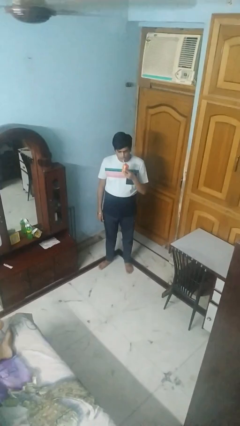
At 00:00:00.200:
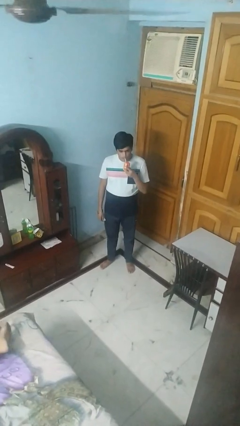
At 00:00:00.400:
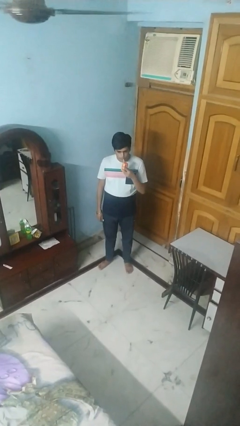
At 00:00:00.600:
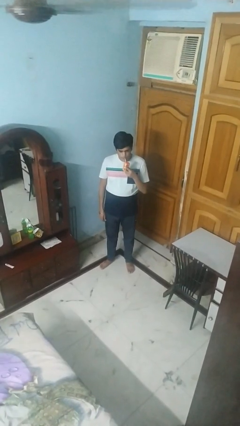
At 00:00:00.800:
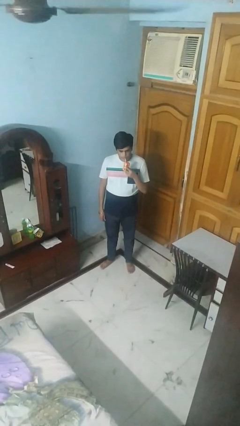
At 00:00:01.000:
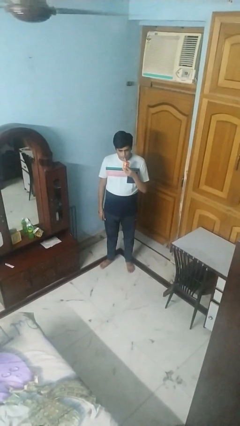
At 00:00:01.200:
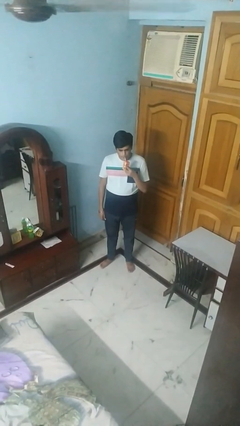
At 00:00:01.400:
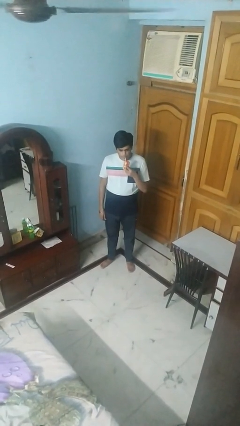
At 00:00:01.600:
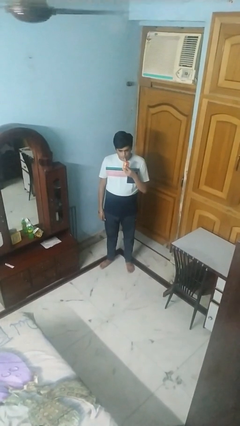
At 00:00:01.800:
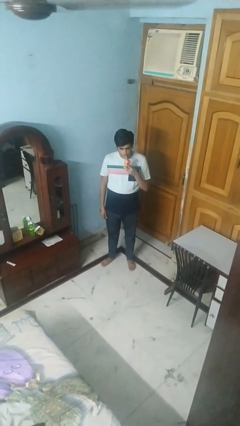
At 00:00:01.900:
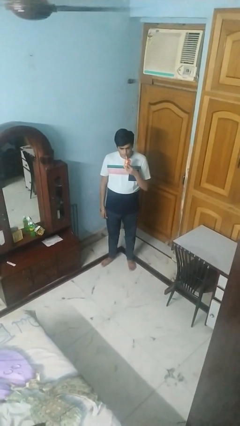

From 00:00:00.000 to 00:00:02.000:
person drinks from straw

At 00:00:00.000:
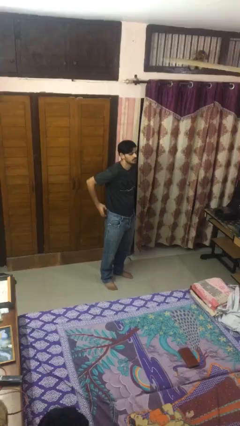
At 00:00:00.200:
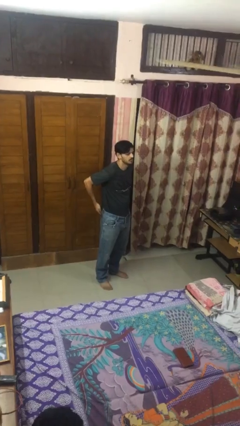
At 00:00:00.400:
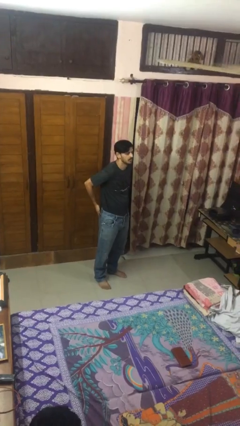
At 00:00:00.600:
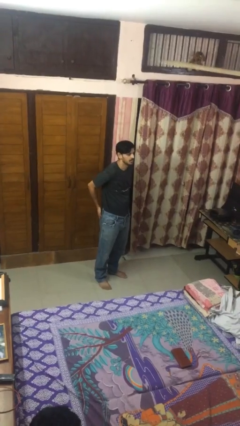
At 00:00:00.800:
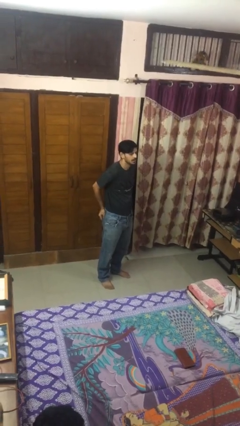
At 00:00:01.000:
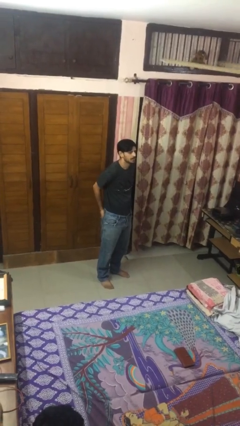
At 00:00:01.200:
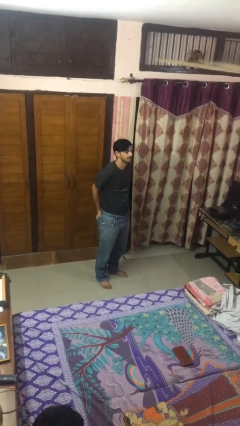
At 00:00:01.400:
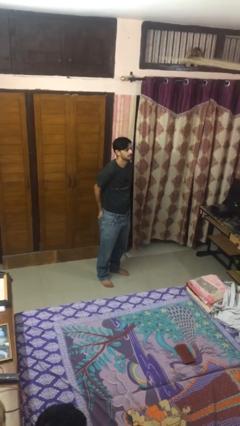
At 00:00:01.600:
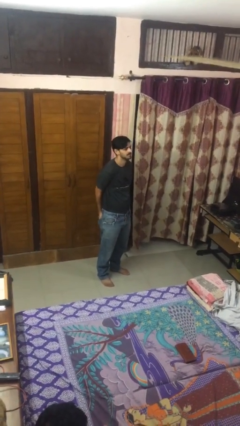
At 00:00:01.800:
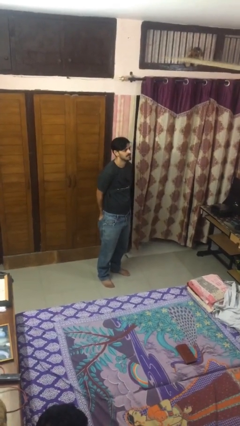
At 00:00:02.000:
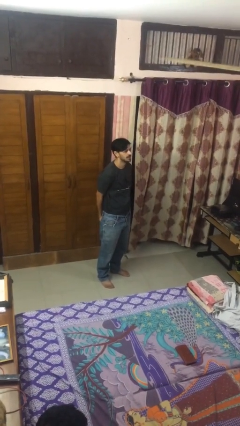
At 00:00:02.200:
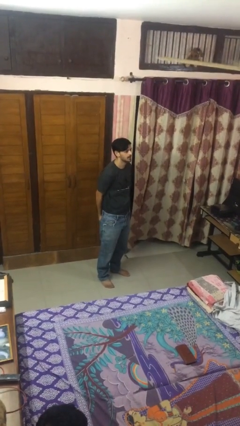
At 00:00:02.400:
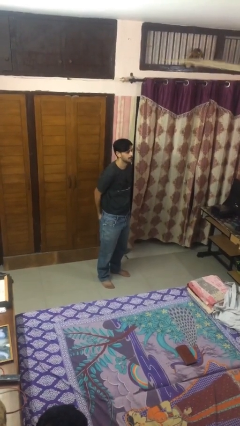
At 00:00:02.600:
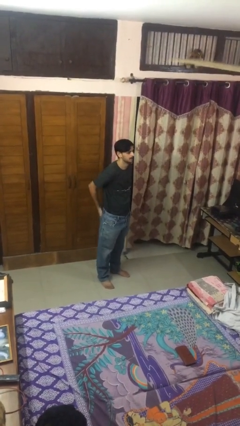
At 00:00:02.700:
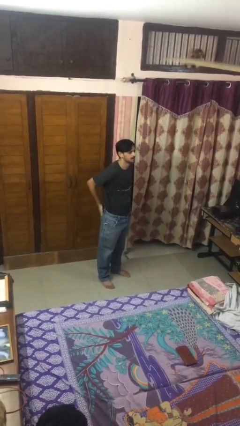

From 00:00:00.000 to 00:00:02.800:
person puts hands in back pockets

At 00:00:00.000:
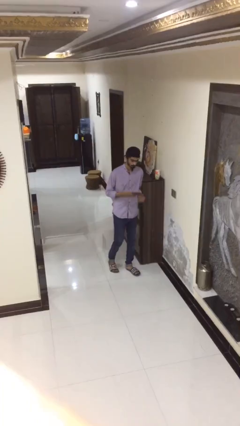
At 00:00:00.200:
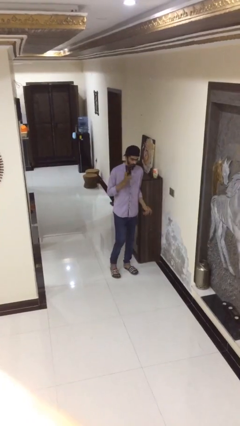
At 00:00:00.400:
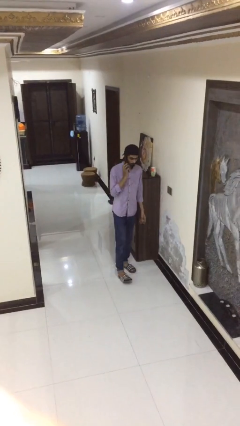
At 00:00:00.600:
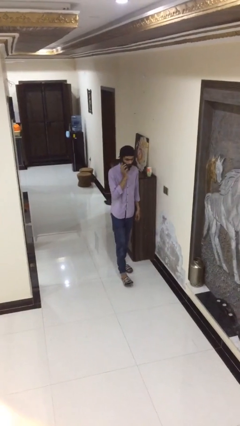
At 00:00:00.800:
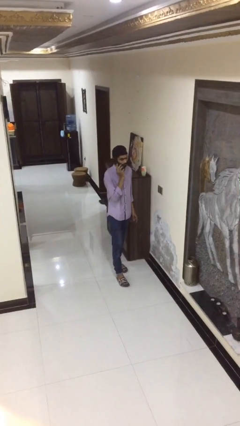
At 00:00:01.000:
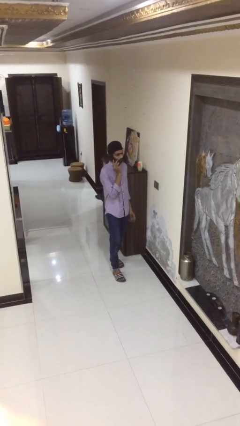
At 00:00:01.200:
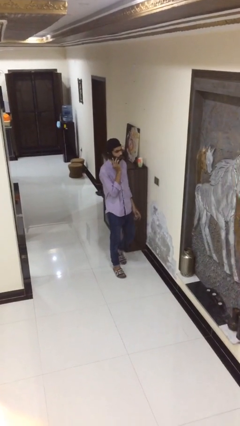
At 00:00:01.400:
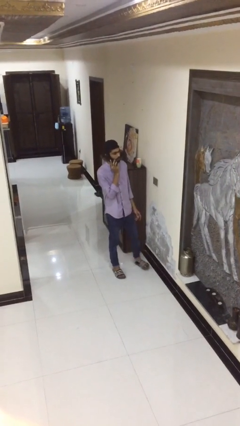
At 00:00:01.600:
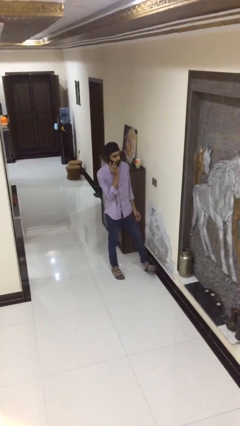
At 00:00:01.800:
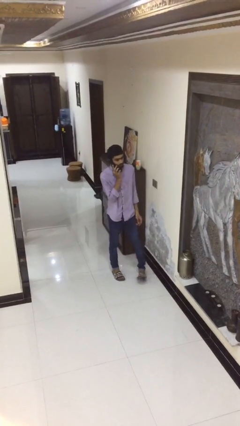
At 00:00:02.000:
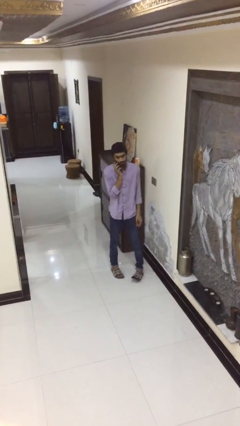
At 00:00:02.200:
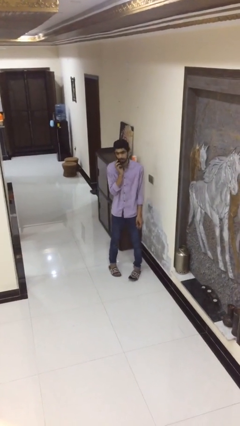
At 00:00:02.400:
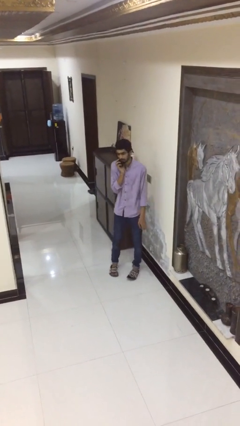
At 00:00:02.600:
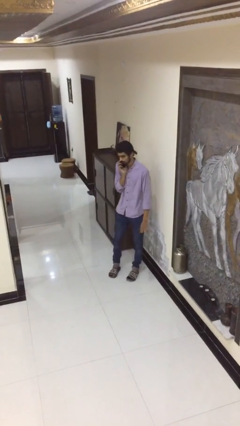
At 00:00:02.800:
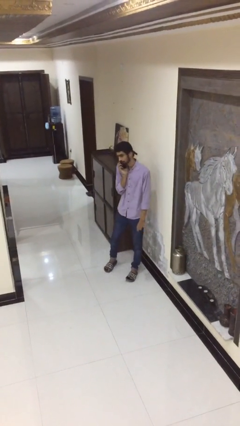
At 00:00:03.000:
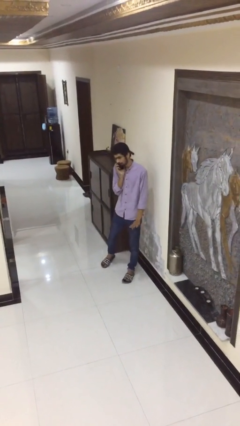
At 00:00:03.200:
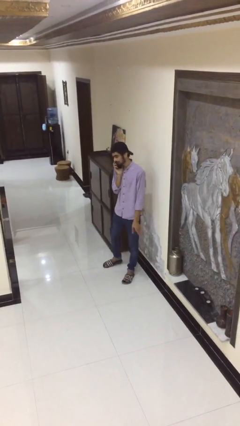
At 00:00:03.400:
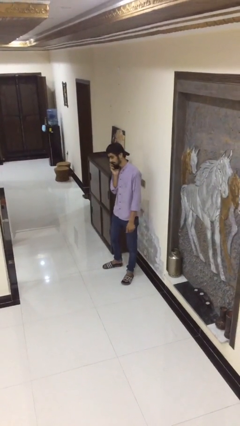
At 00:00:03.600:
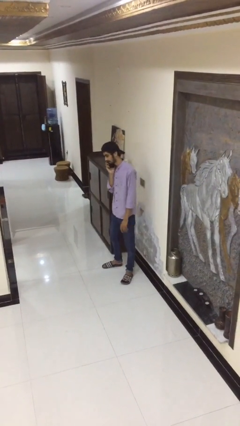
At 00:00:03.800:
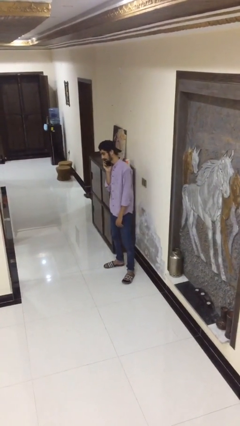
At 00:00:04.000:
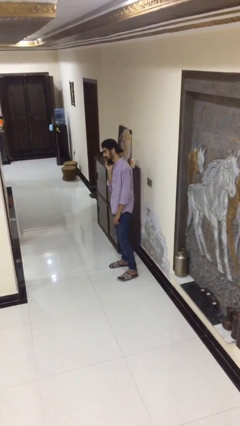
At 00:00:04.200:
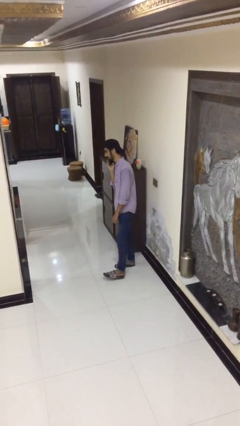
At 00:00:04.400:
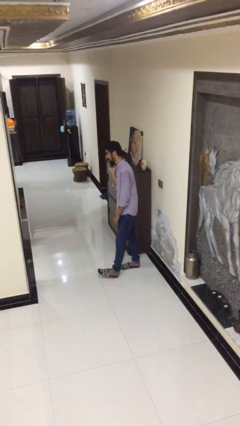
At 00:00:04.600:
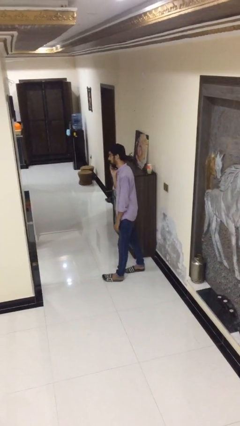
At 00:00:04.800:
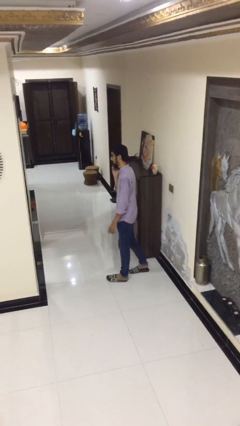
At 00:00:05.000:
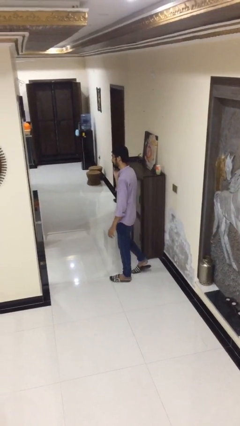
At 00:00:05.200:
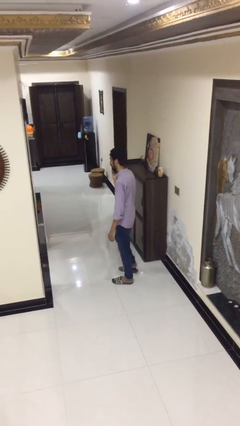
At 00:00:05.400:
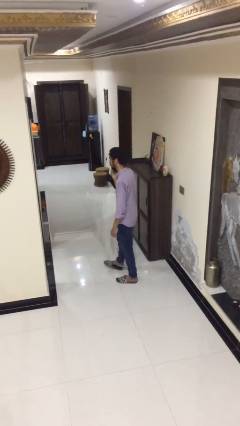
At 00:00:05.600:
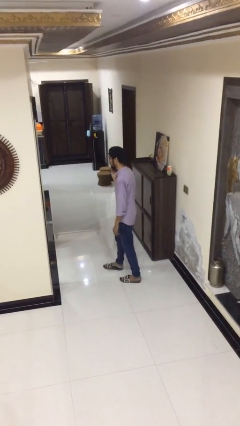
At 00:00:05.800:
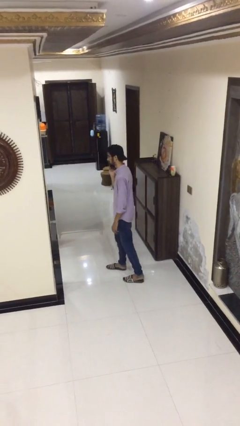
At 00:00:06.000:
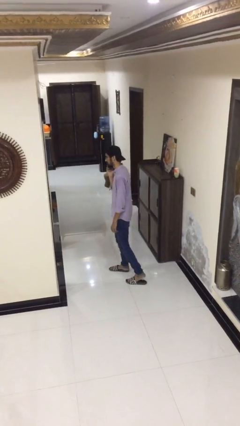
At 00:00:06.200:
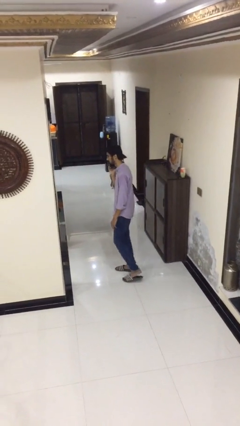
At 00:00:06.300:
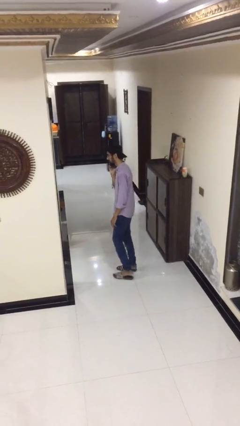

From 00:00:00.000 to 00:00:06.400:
person talks on phone

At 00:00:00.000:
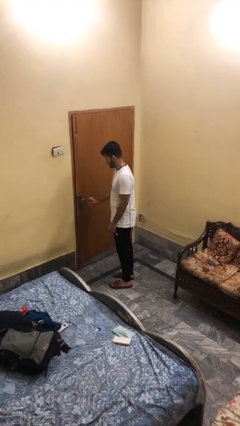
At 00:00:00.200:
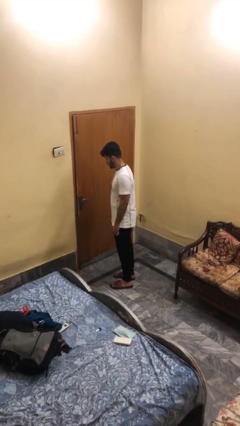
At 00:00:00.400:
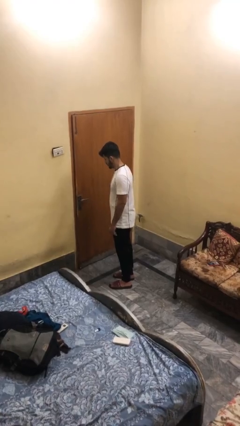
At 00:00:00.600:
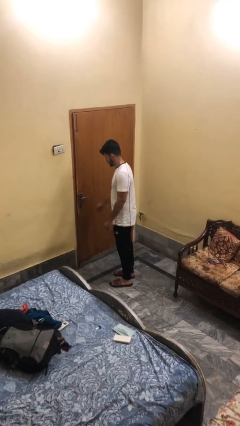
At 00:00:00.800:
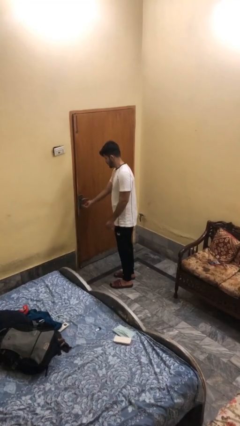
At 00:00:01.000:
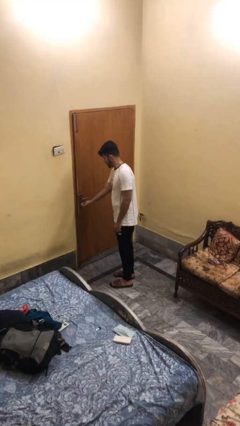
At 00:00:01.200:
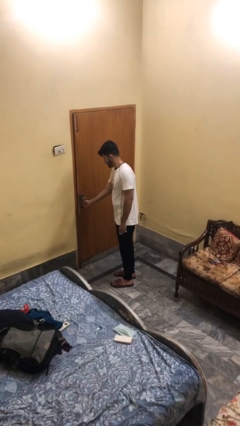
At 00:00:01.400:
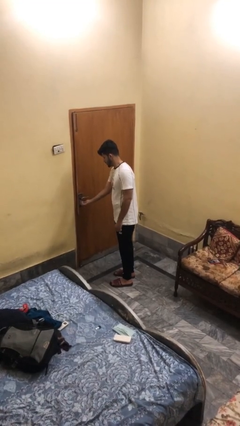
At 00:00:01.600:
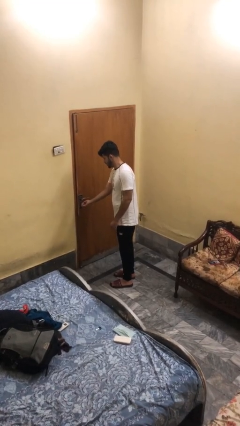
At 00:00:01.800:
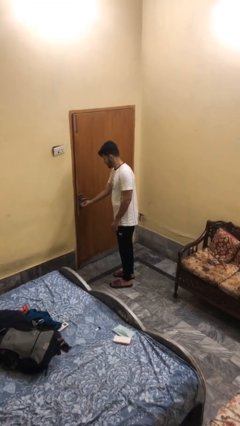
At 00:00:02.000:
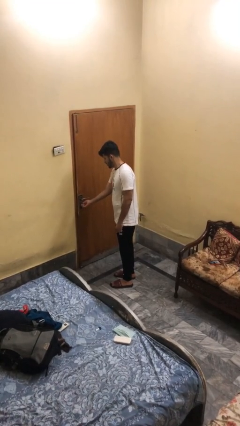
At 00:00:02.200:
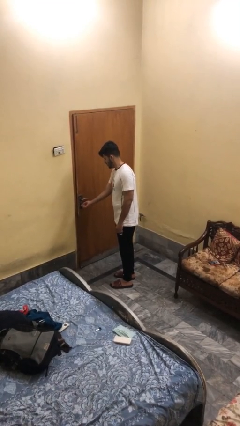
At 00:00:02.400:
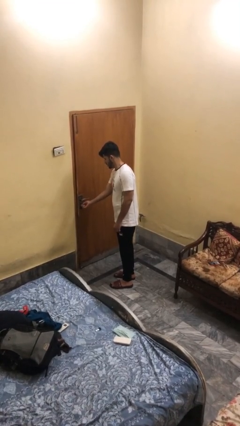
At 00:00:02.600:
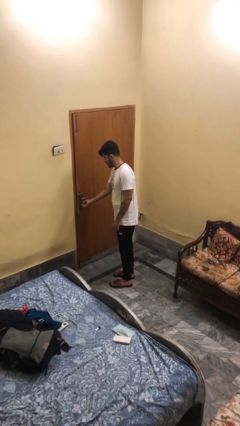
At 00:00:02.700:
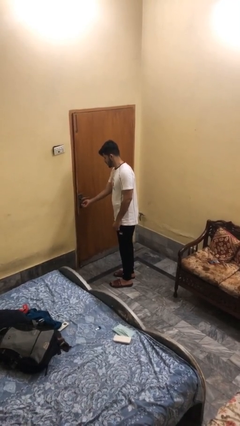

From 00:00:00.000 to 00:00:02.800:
person locks door with keys

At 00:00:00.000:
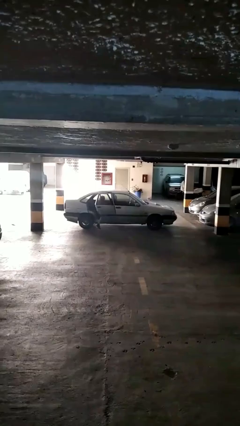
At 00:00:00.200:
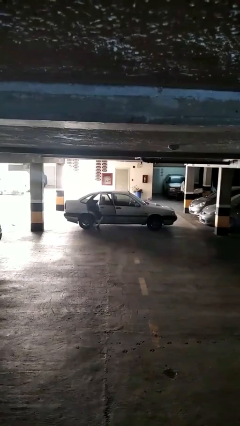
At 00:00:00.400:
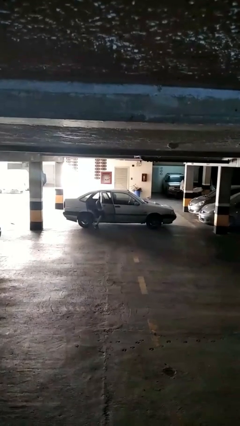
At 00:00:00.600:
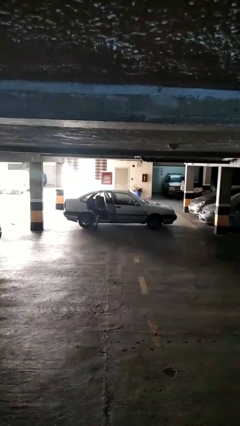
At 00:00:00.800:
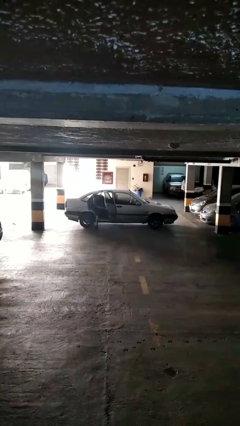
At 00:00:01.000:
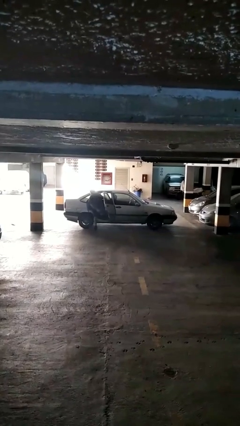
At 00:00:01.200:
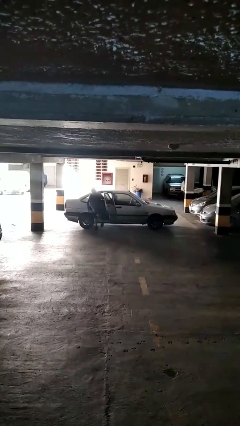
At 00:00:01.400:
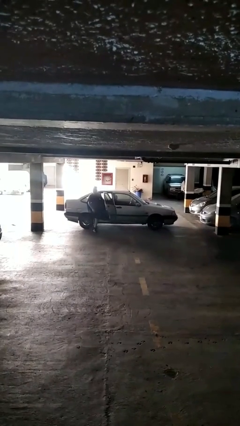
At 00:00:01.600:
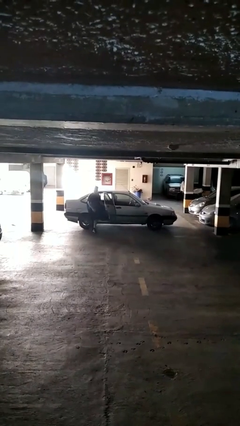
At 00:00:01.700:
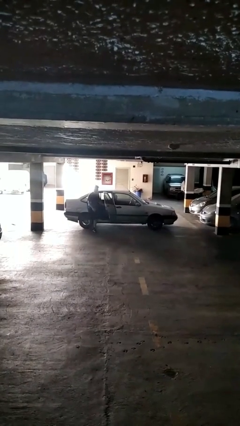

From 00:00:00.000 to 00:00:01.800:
car drops off person

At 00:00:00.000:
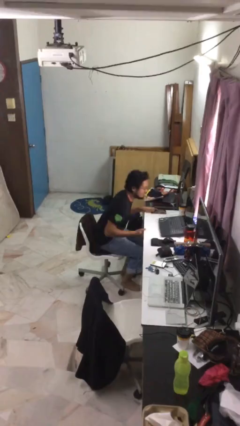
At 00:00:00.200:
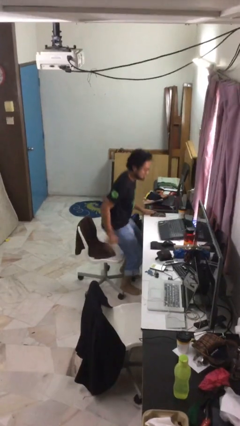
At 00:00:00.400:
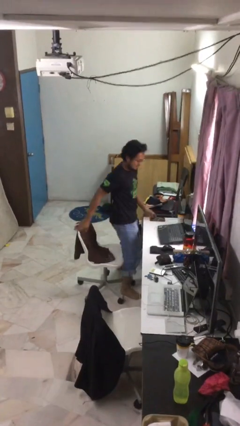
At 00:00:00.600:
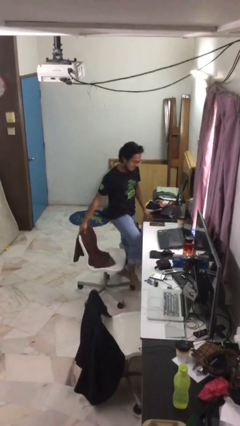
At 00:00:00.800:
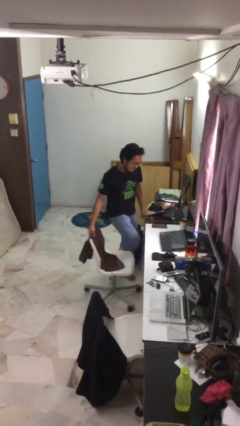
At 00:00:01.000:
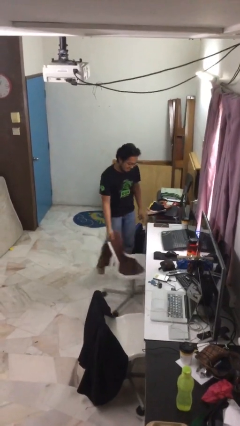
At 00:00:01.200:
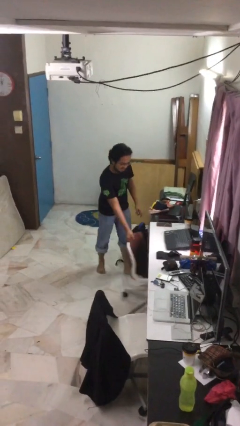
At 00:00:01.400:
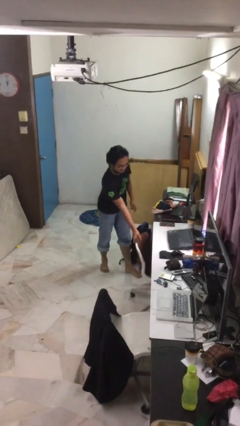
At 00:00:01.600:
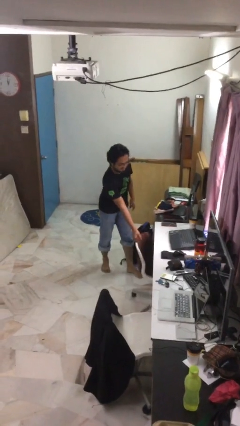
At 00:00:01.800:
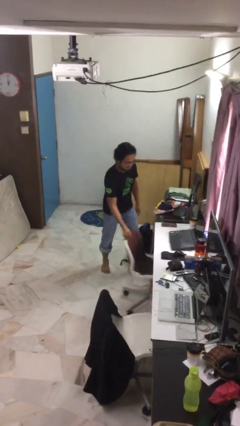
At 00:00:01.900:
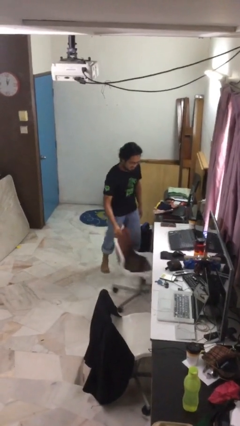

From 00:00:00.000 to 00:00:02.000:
person stands up
